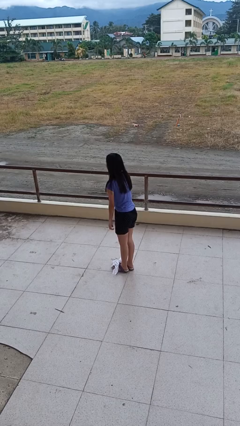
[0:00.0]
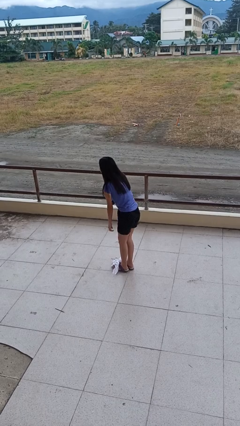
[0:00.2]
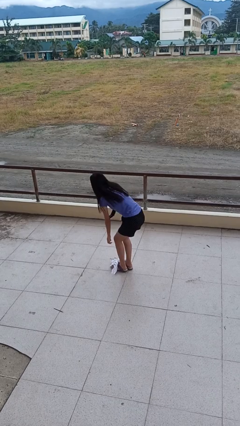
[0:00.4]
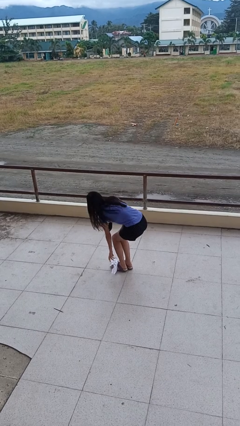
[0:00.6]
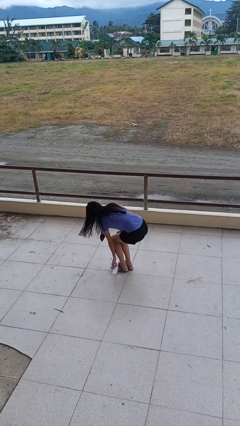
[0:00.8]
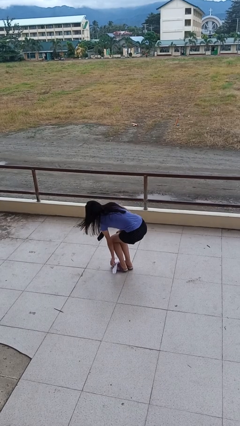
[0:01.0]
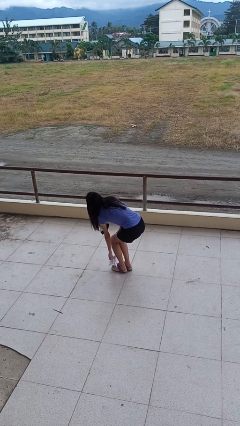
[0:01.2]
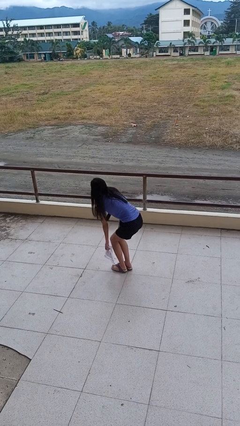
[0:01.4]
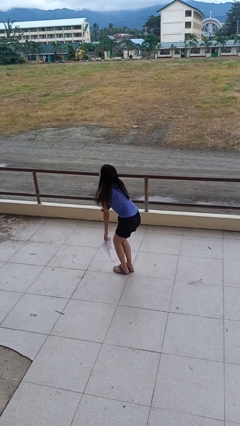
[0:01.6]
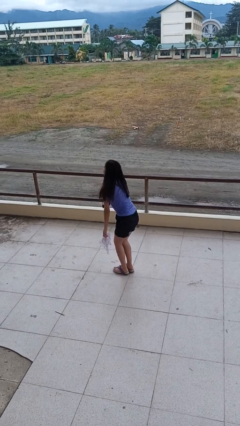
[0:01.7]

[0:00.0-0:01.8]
person picks up object from floor

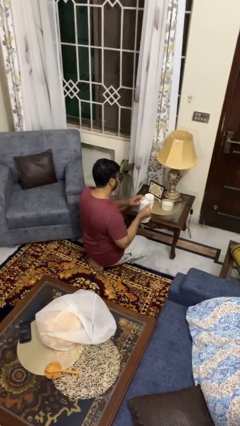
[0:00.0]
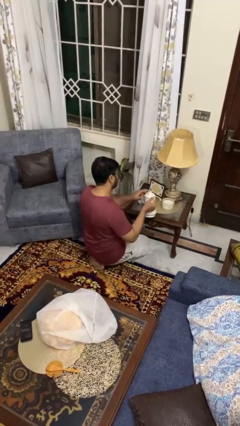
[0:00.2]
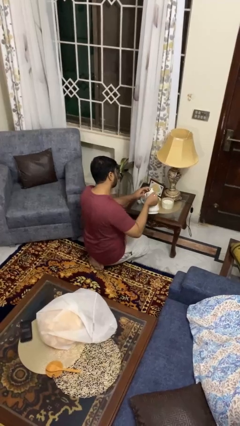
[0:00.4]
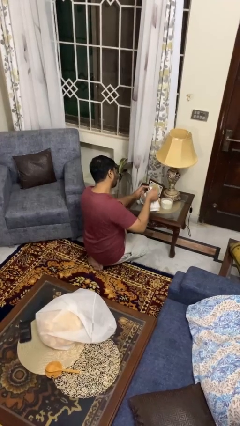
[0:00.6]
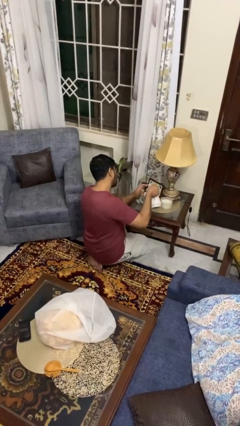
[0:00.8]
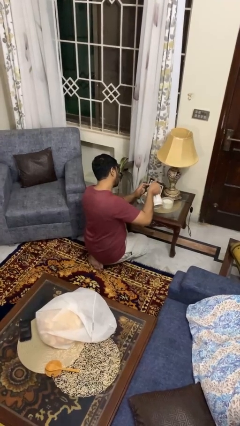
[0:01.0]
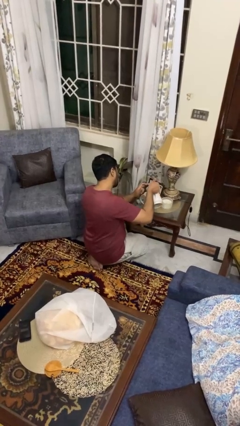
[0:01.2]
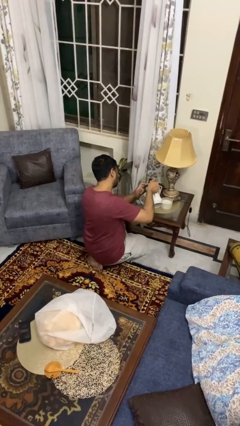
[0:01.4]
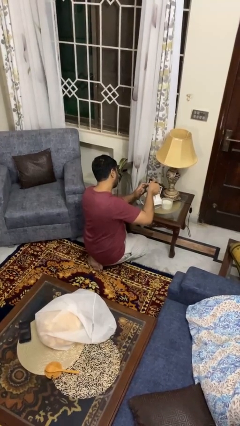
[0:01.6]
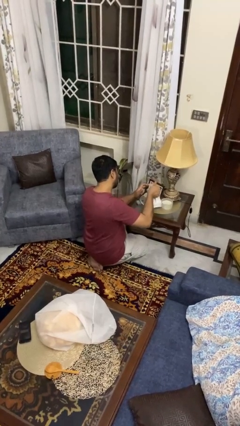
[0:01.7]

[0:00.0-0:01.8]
person pours coffee into mug

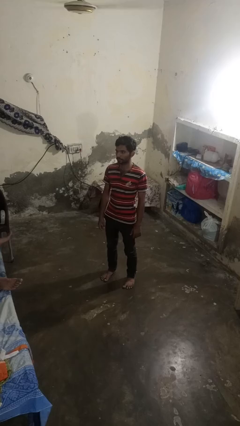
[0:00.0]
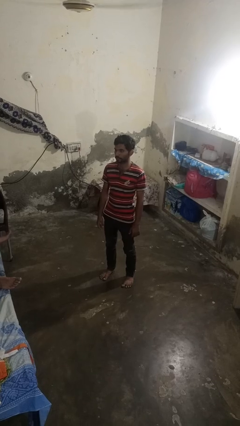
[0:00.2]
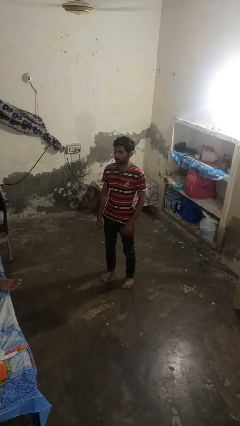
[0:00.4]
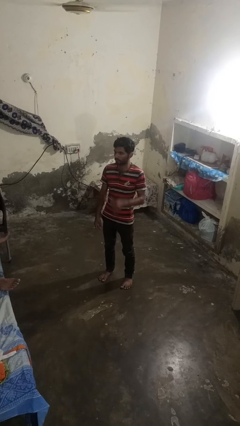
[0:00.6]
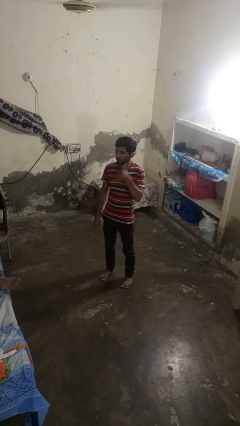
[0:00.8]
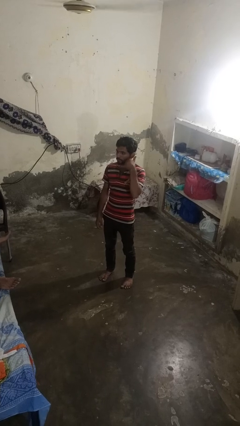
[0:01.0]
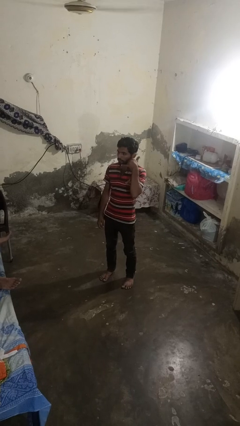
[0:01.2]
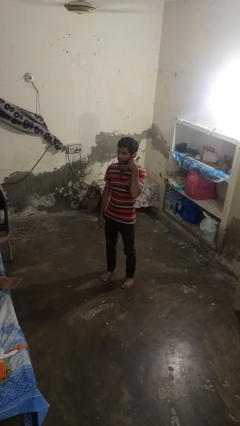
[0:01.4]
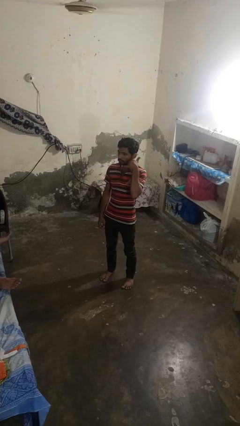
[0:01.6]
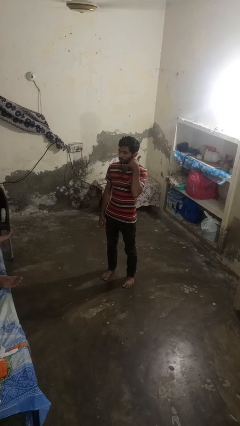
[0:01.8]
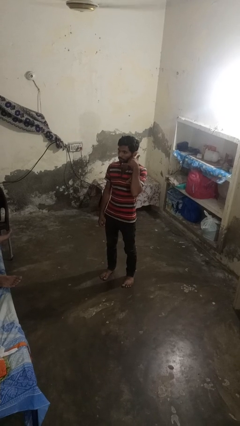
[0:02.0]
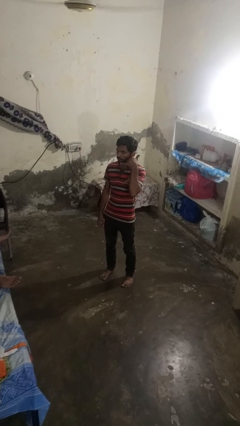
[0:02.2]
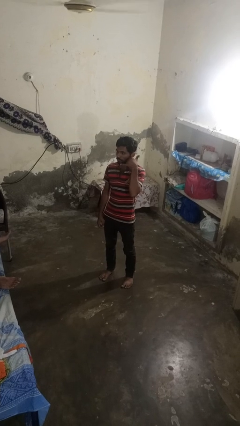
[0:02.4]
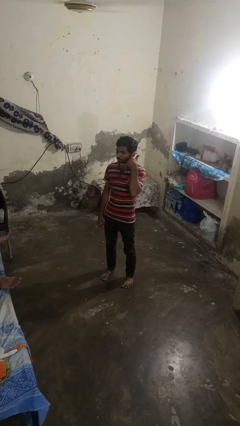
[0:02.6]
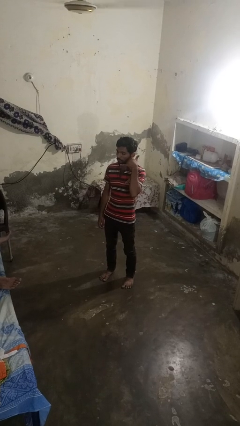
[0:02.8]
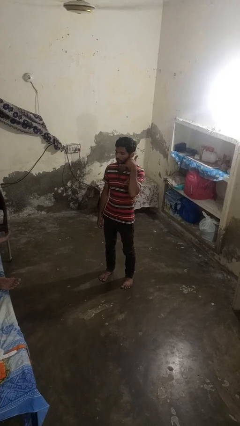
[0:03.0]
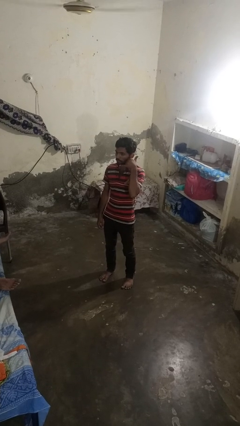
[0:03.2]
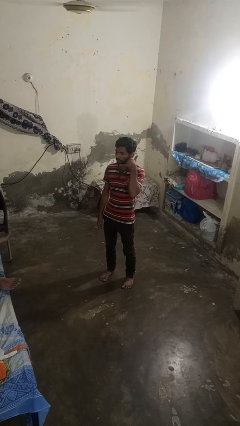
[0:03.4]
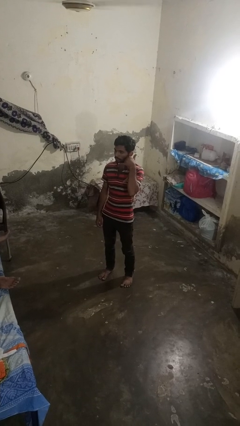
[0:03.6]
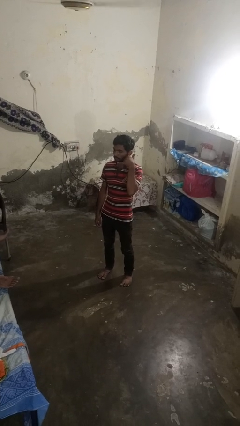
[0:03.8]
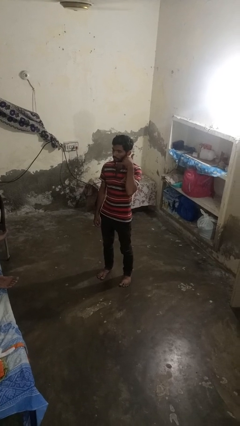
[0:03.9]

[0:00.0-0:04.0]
person gestures call me

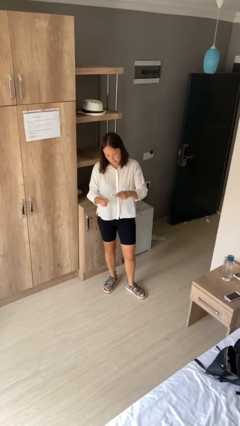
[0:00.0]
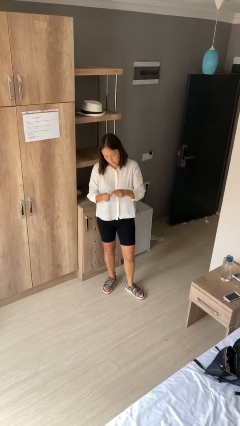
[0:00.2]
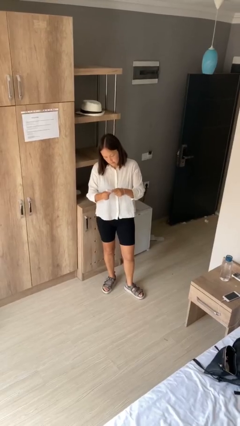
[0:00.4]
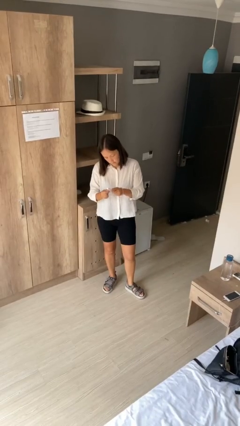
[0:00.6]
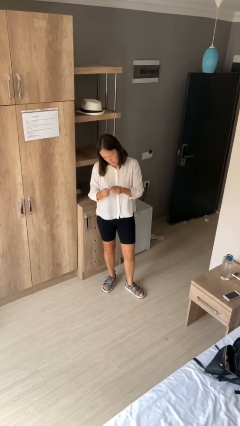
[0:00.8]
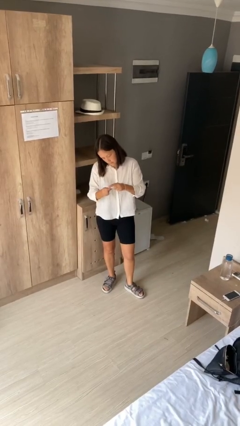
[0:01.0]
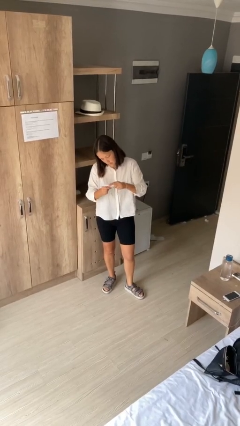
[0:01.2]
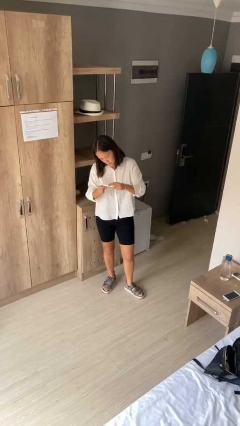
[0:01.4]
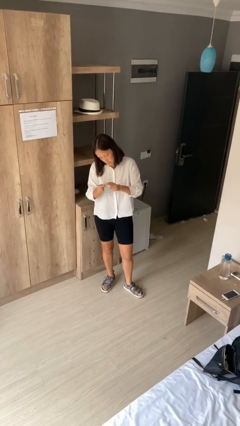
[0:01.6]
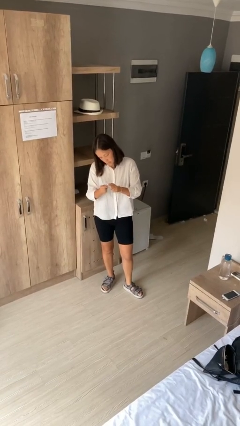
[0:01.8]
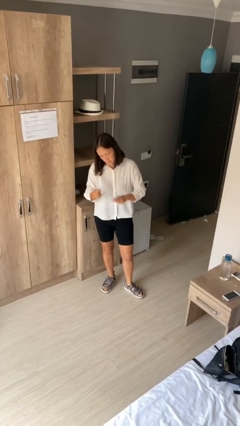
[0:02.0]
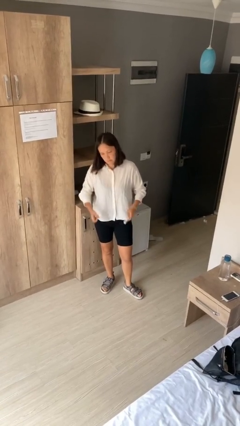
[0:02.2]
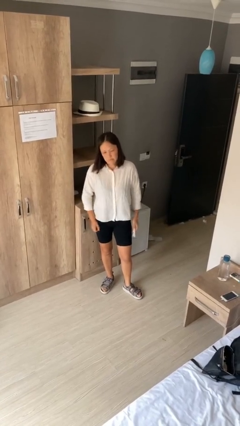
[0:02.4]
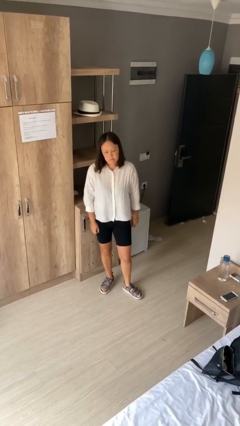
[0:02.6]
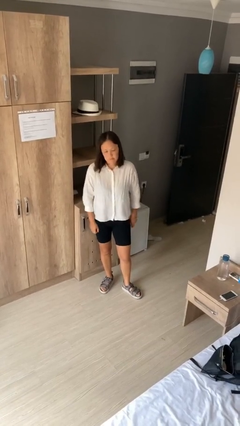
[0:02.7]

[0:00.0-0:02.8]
person files fingernails

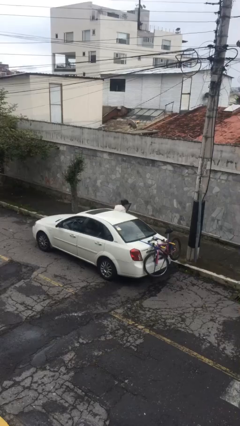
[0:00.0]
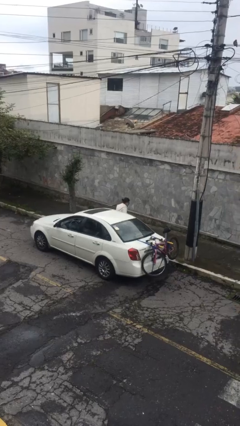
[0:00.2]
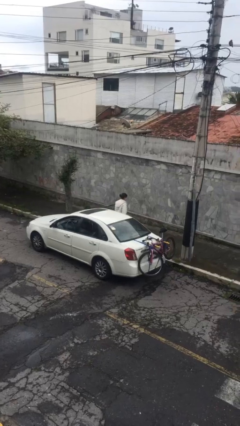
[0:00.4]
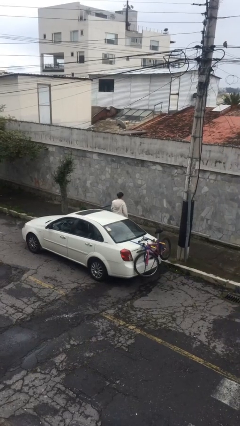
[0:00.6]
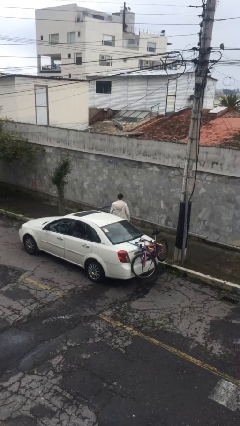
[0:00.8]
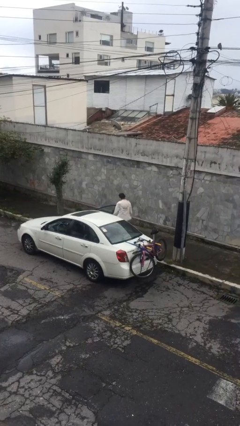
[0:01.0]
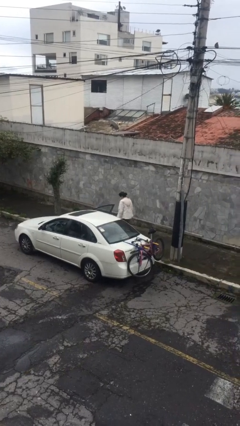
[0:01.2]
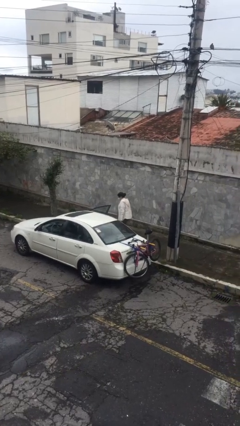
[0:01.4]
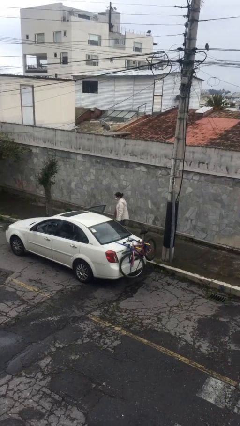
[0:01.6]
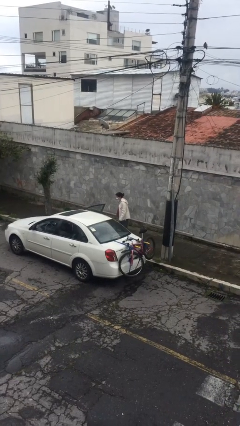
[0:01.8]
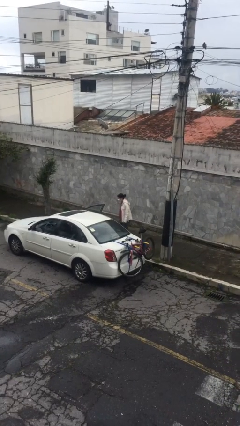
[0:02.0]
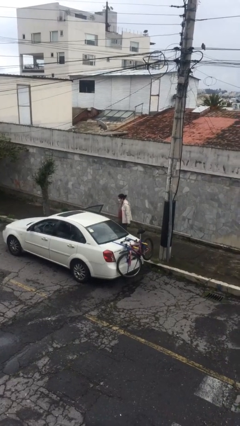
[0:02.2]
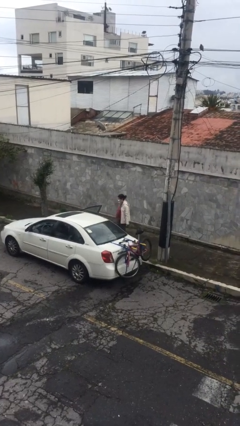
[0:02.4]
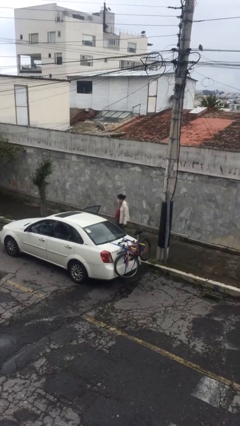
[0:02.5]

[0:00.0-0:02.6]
person exits car

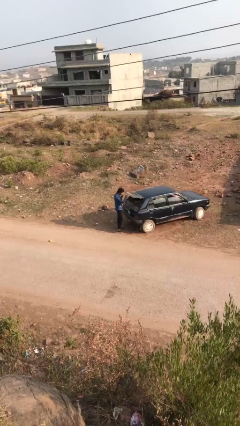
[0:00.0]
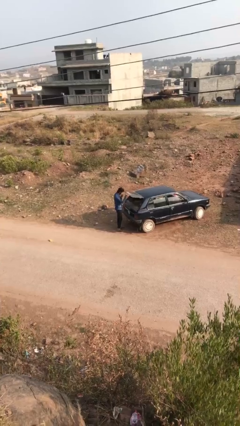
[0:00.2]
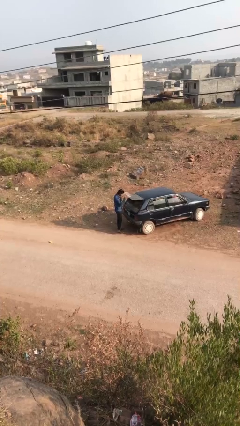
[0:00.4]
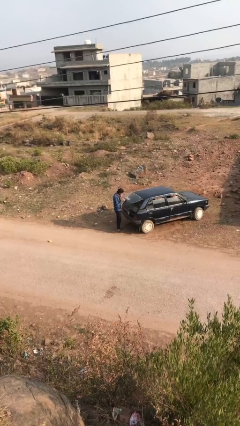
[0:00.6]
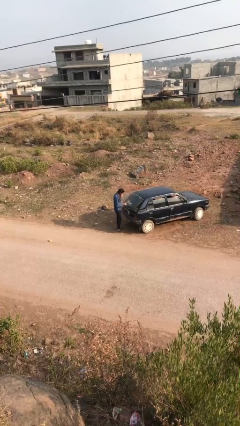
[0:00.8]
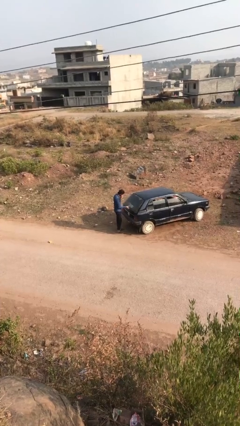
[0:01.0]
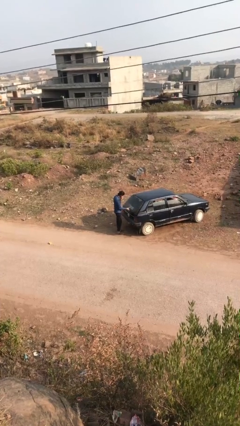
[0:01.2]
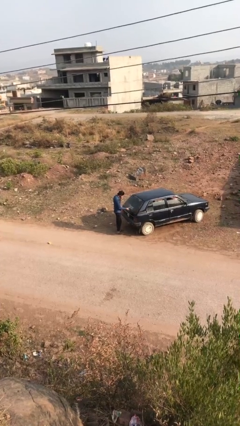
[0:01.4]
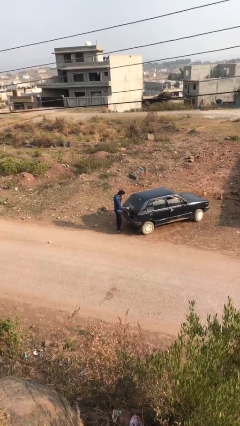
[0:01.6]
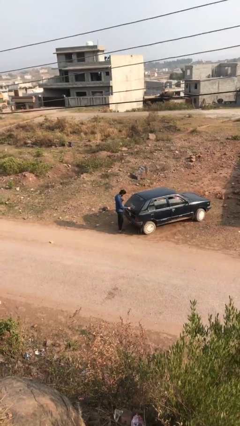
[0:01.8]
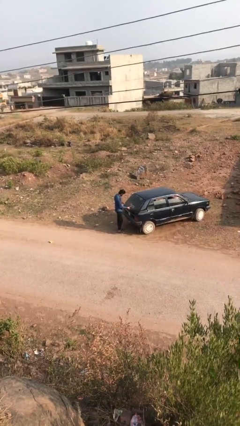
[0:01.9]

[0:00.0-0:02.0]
person closes car trunk

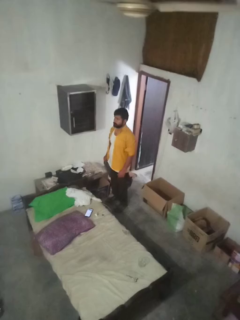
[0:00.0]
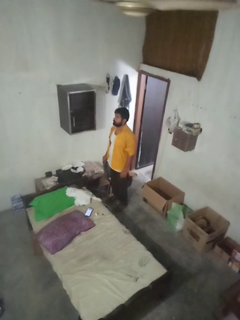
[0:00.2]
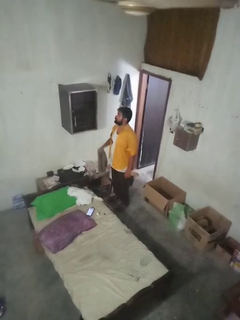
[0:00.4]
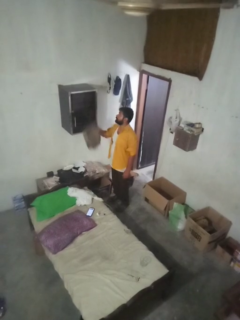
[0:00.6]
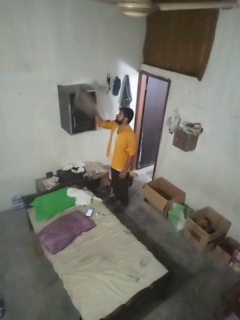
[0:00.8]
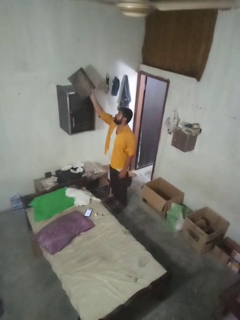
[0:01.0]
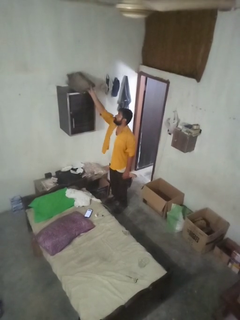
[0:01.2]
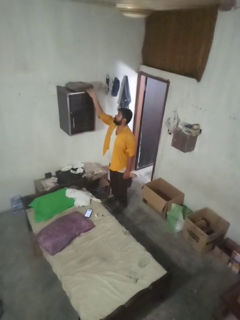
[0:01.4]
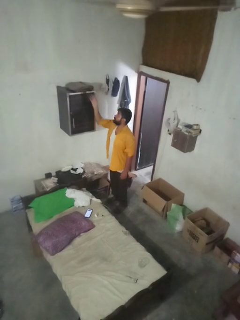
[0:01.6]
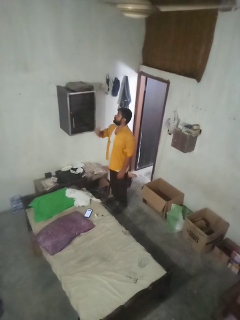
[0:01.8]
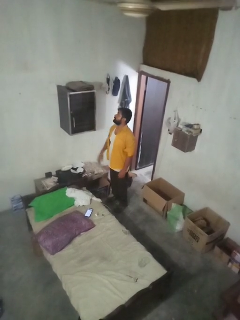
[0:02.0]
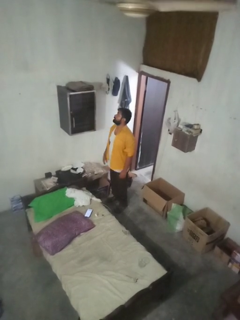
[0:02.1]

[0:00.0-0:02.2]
person puts down object on shelf

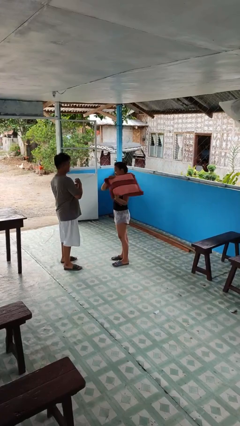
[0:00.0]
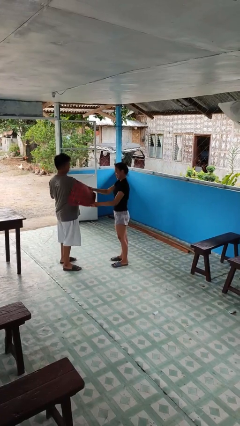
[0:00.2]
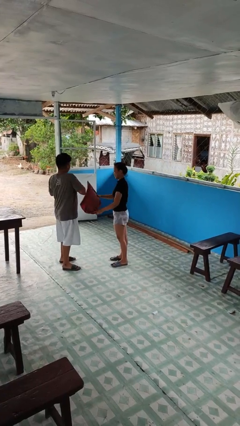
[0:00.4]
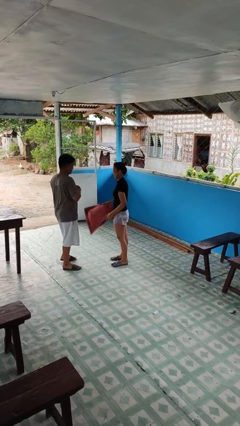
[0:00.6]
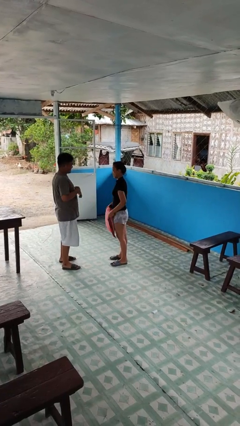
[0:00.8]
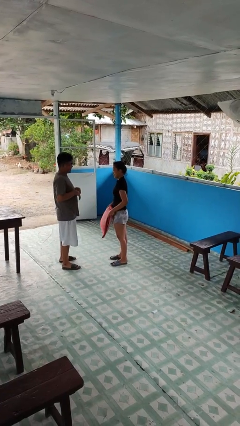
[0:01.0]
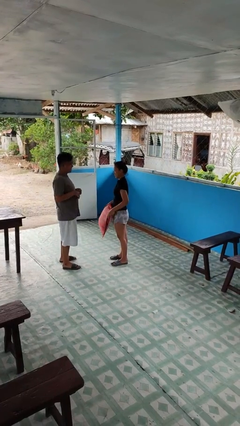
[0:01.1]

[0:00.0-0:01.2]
person hits person with pillow
